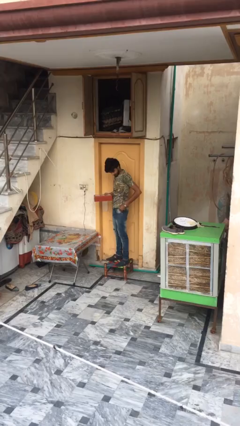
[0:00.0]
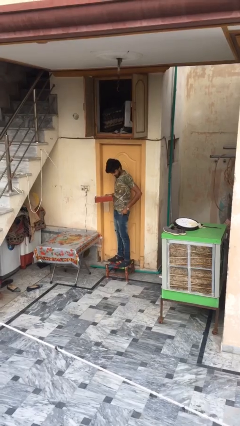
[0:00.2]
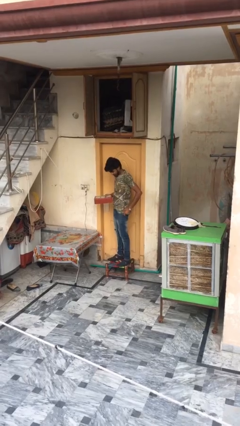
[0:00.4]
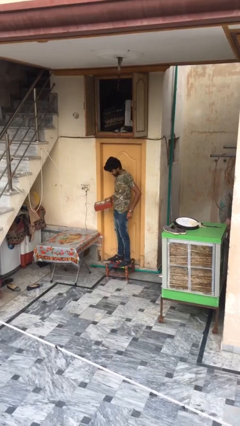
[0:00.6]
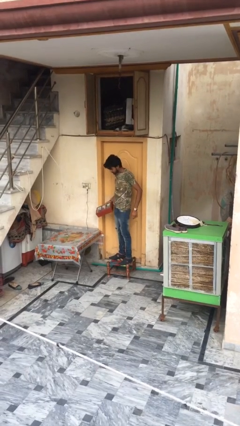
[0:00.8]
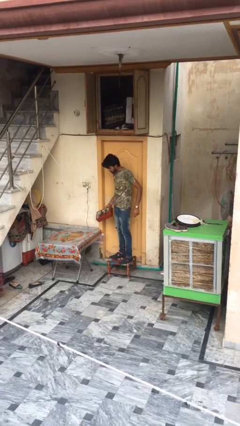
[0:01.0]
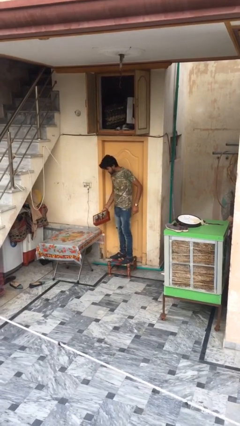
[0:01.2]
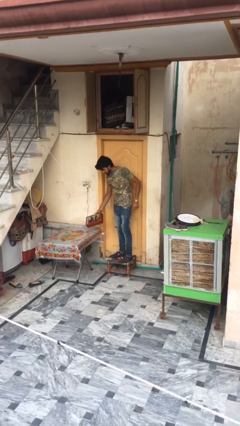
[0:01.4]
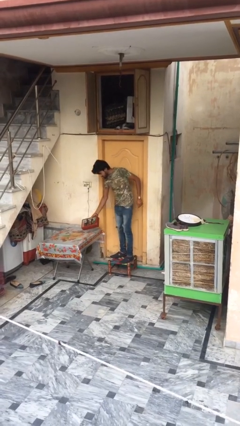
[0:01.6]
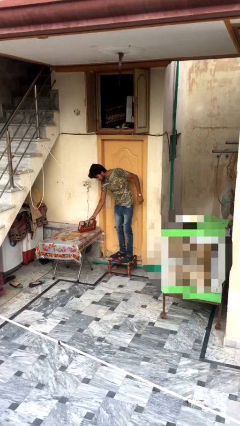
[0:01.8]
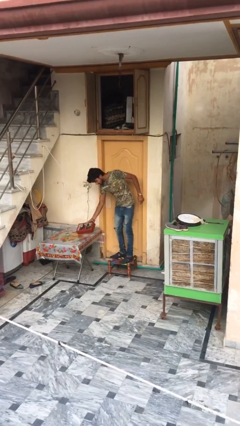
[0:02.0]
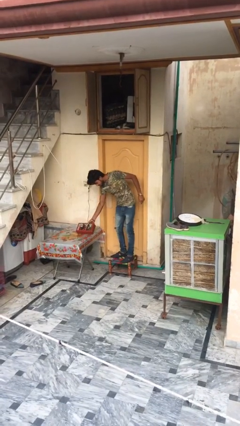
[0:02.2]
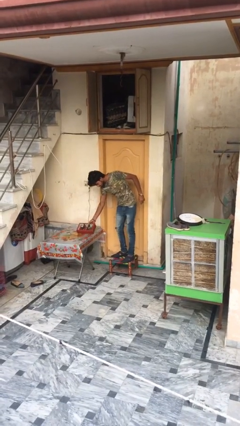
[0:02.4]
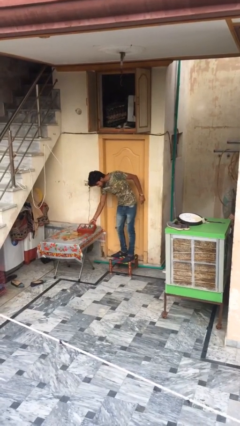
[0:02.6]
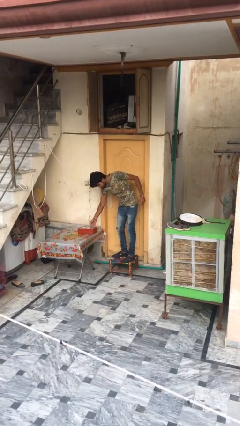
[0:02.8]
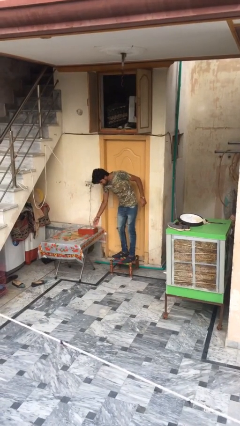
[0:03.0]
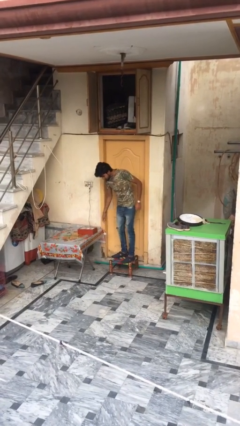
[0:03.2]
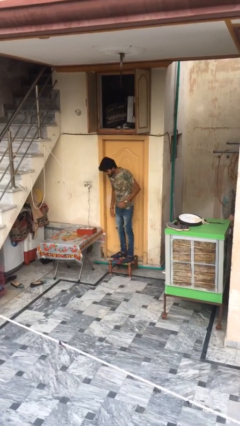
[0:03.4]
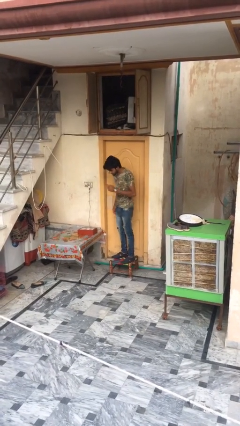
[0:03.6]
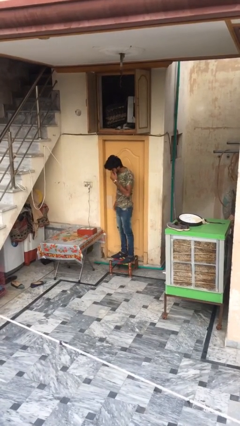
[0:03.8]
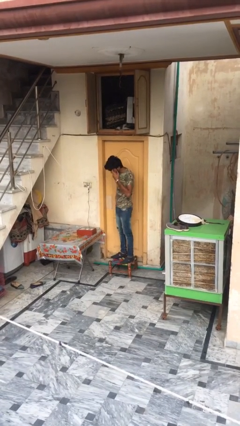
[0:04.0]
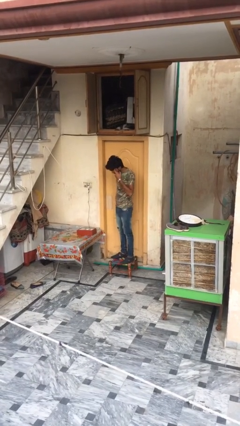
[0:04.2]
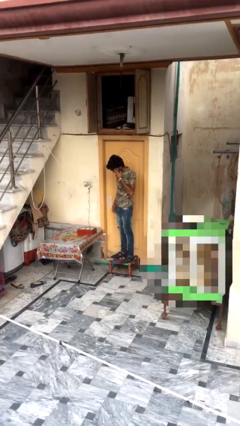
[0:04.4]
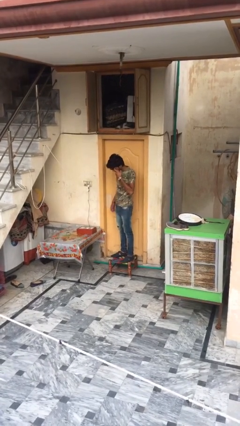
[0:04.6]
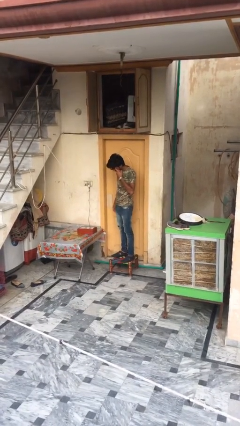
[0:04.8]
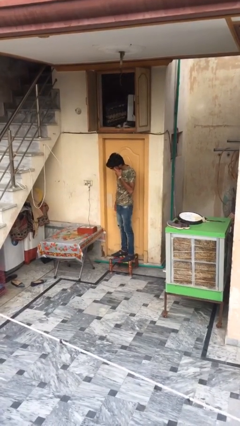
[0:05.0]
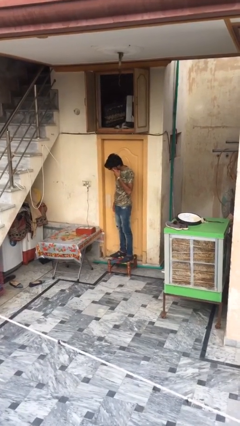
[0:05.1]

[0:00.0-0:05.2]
person puts down object on table

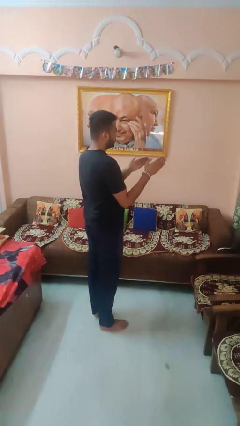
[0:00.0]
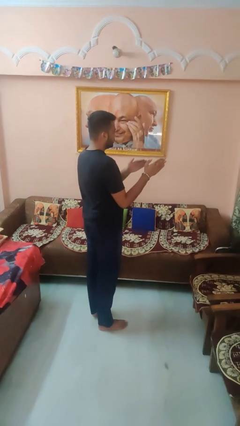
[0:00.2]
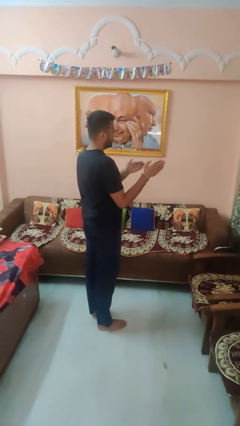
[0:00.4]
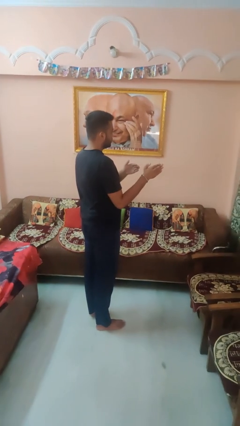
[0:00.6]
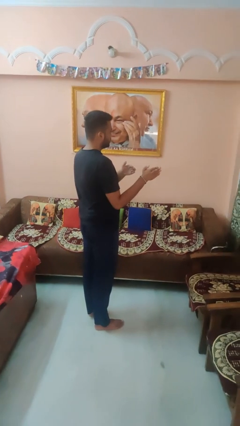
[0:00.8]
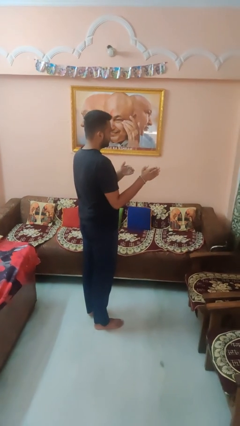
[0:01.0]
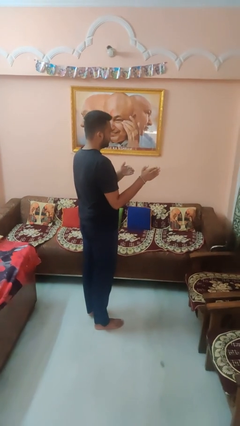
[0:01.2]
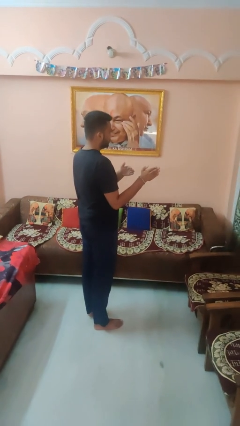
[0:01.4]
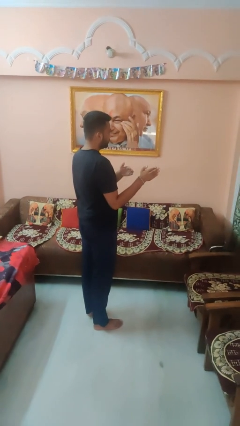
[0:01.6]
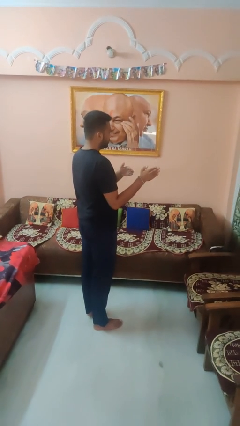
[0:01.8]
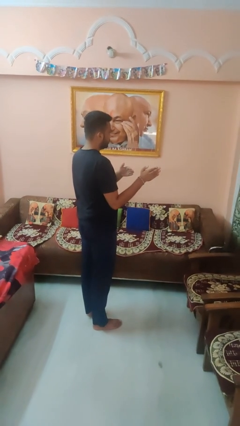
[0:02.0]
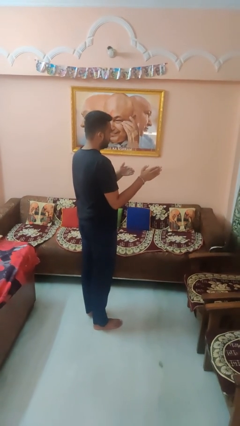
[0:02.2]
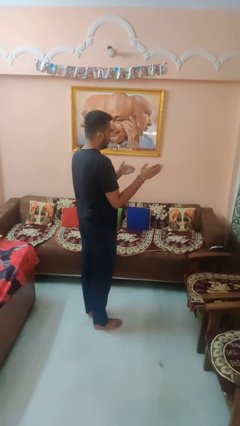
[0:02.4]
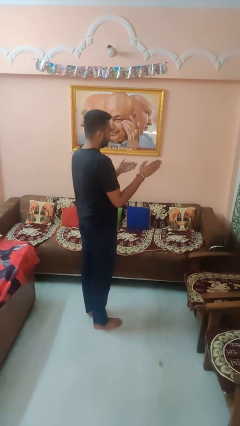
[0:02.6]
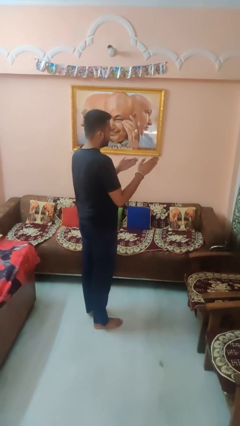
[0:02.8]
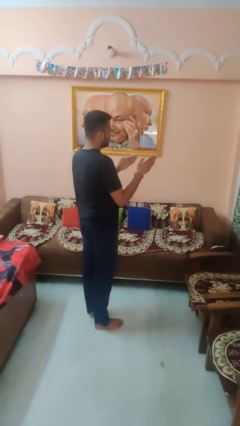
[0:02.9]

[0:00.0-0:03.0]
person gestures swipe right

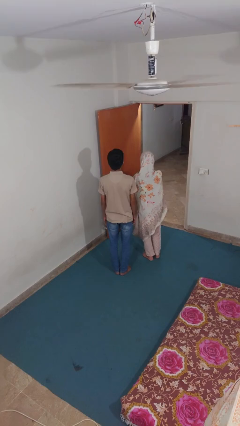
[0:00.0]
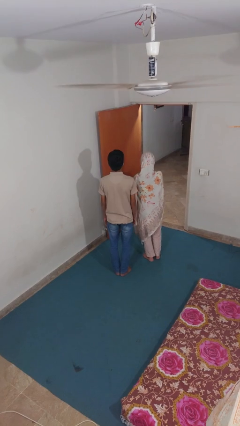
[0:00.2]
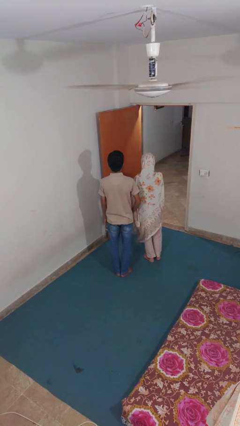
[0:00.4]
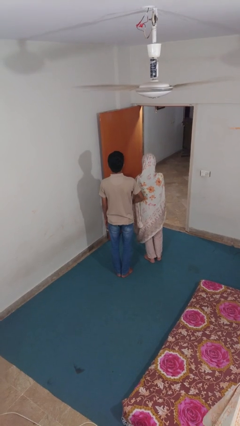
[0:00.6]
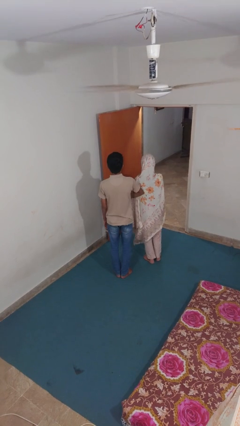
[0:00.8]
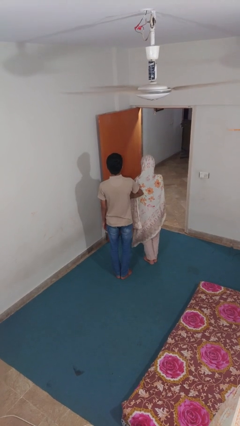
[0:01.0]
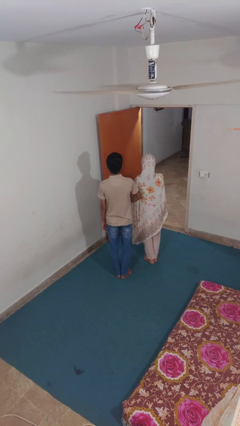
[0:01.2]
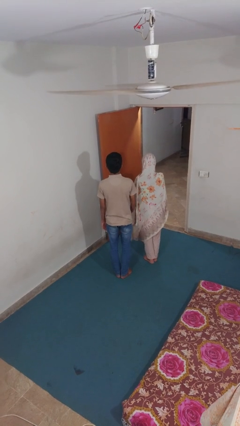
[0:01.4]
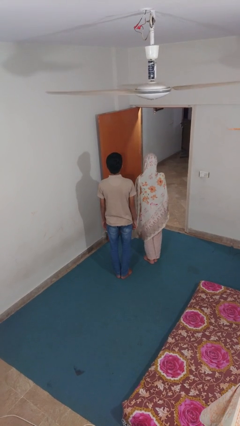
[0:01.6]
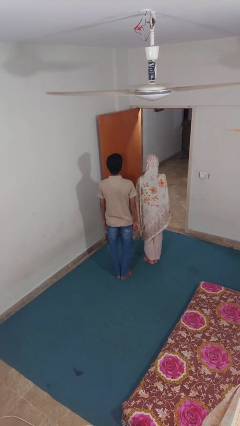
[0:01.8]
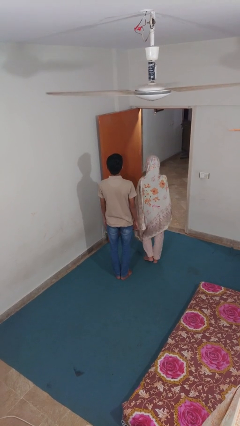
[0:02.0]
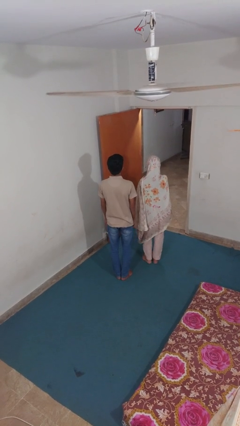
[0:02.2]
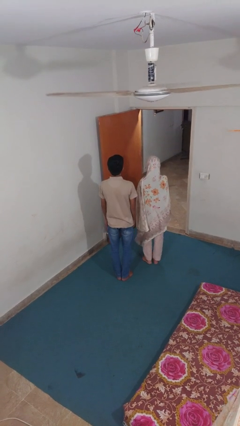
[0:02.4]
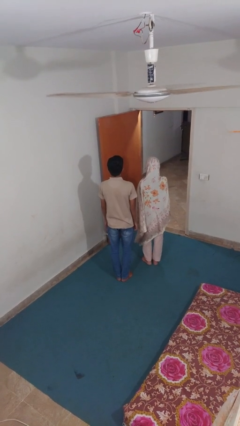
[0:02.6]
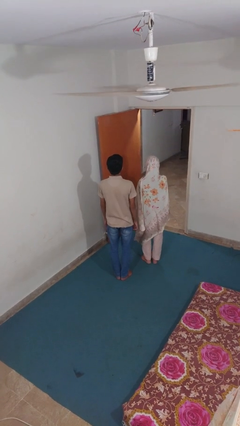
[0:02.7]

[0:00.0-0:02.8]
person nudges person with elbow

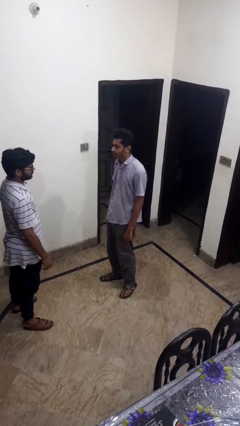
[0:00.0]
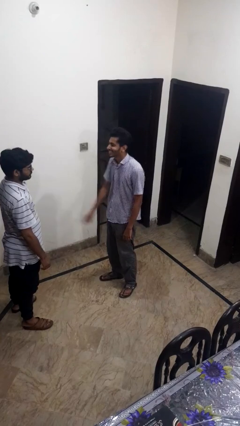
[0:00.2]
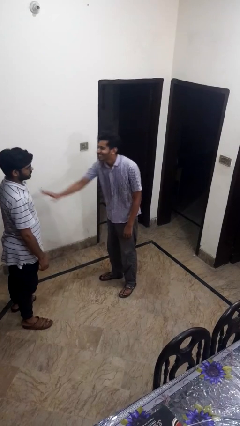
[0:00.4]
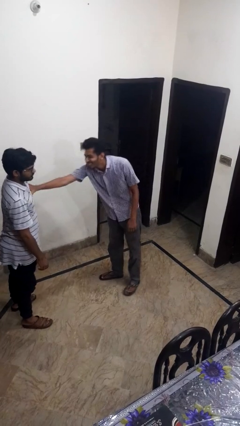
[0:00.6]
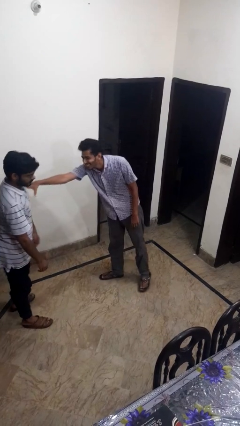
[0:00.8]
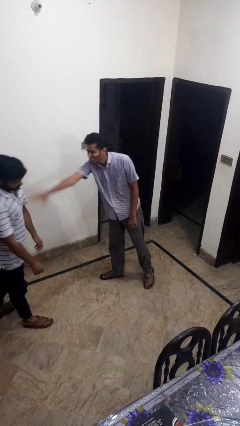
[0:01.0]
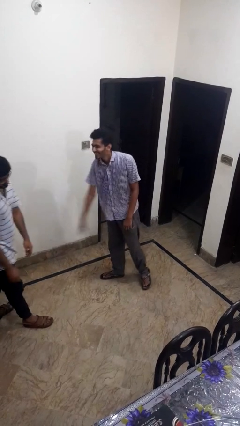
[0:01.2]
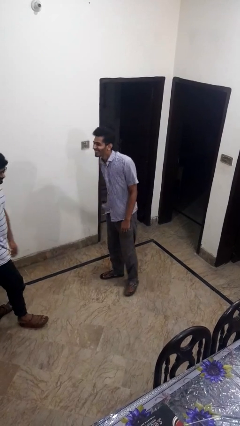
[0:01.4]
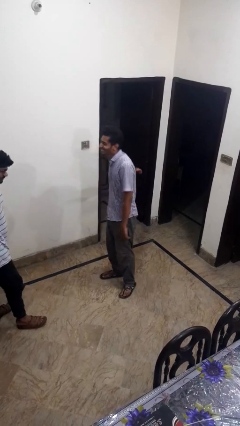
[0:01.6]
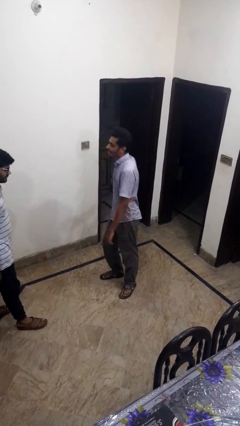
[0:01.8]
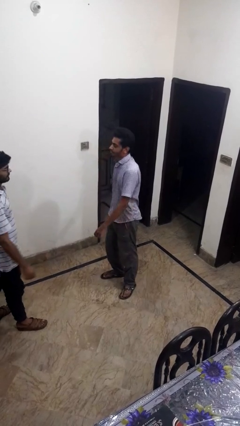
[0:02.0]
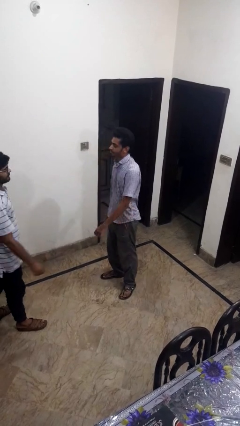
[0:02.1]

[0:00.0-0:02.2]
person shoves person

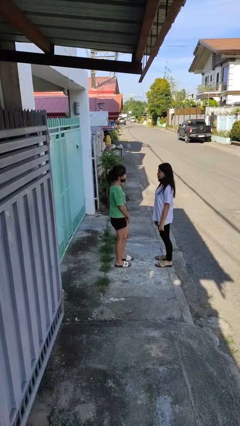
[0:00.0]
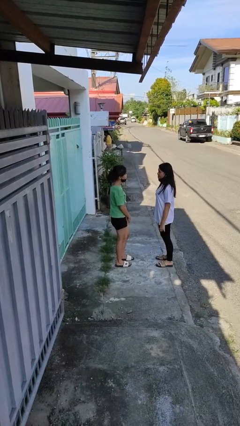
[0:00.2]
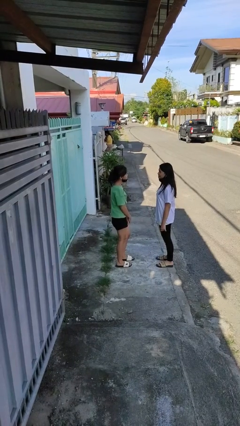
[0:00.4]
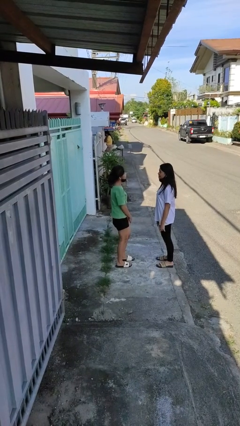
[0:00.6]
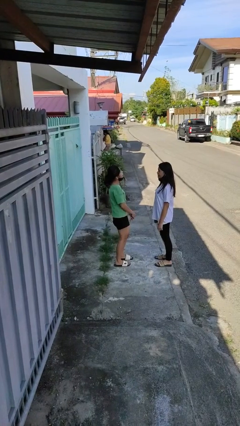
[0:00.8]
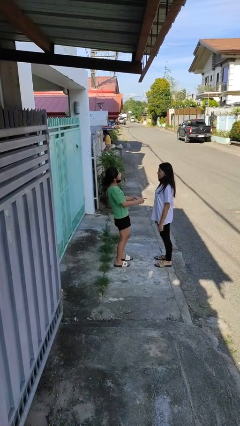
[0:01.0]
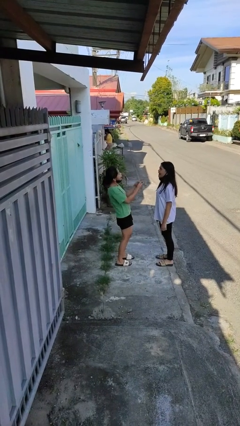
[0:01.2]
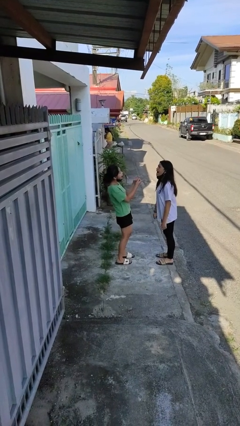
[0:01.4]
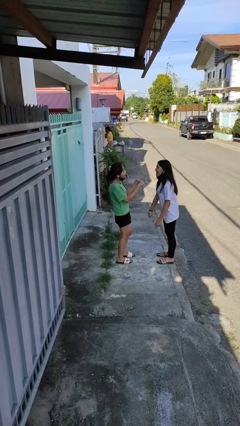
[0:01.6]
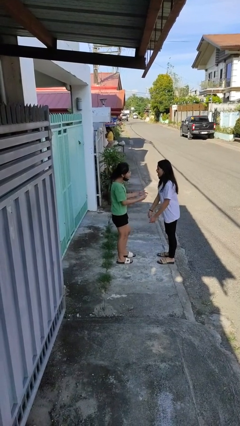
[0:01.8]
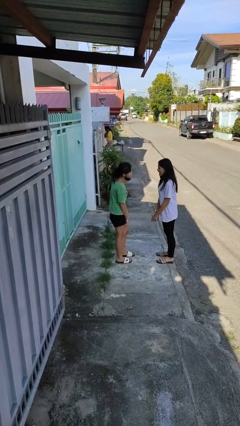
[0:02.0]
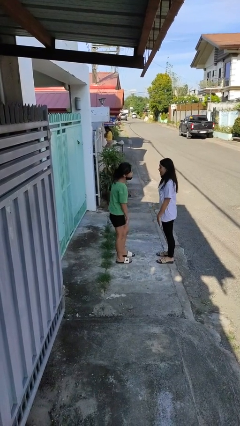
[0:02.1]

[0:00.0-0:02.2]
person laughs with person

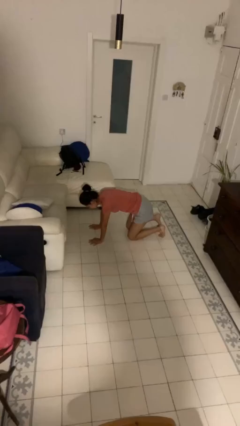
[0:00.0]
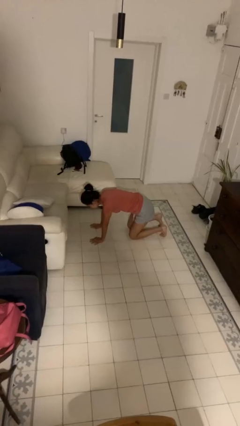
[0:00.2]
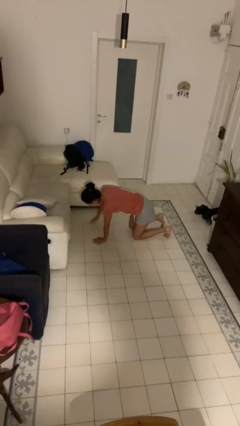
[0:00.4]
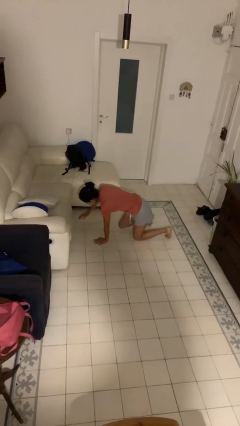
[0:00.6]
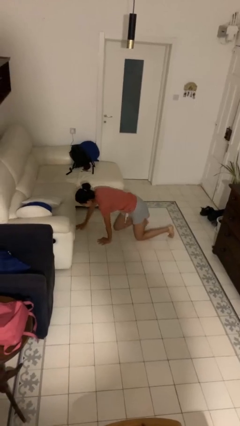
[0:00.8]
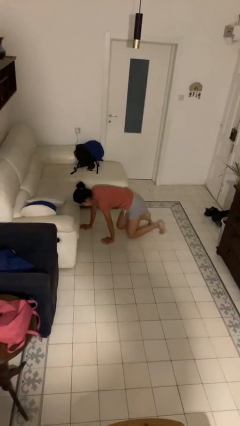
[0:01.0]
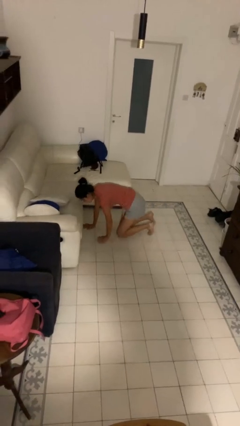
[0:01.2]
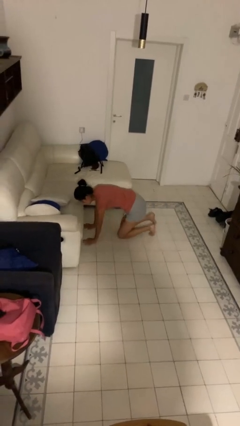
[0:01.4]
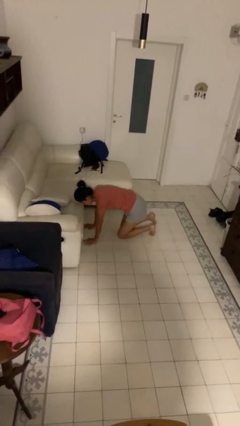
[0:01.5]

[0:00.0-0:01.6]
person crawls

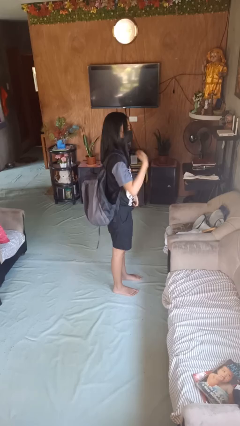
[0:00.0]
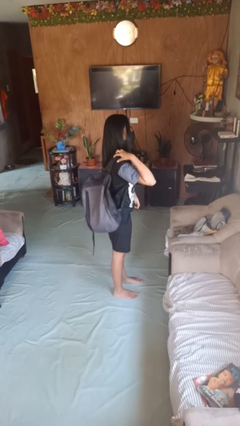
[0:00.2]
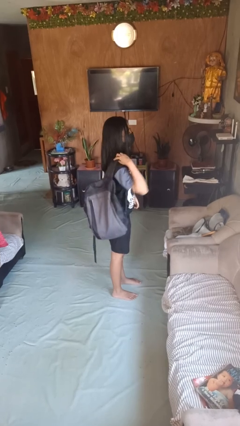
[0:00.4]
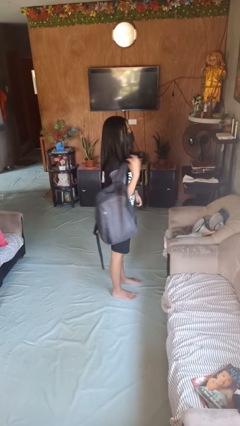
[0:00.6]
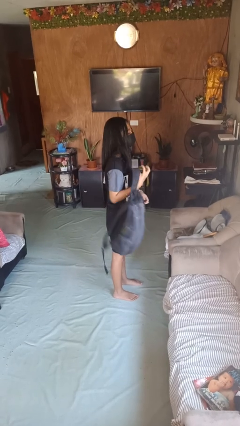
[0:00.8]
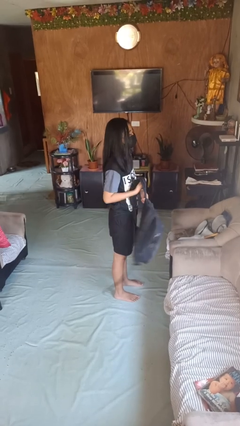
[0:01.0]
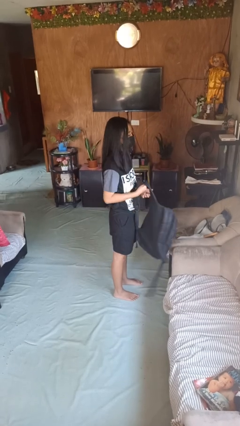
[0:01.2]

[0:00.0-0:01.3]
person takes off backpack
